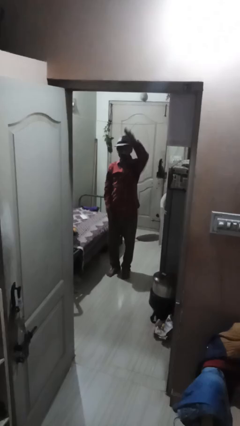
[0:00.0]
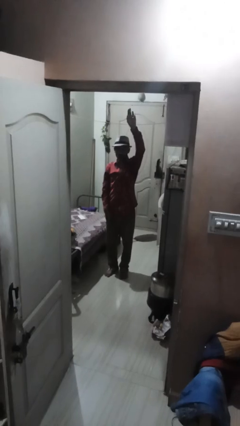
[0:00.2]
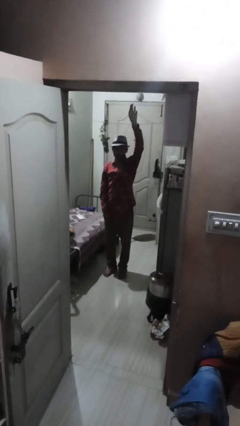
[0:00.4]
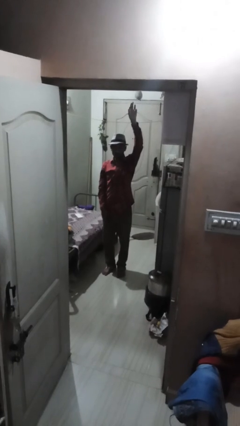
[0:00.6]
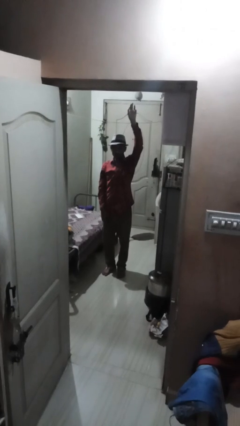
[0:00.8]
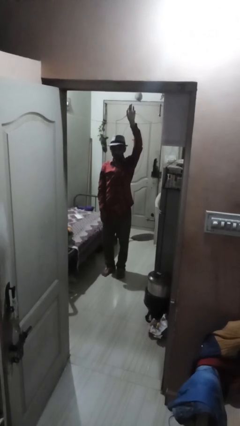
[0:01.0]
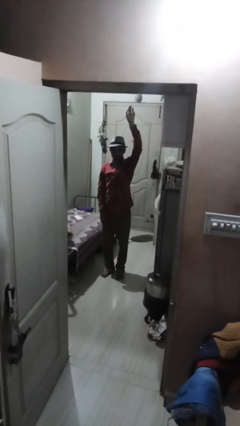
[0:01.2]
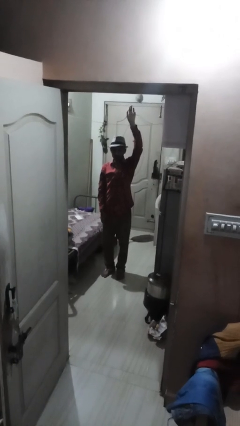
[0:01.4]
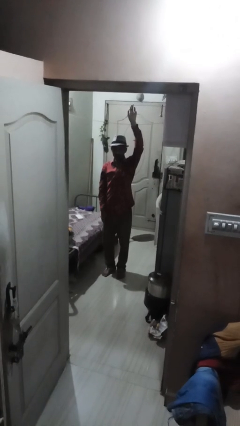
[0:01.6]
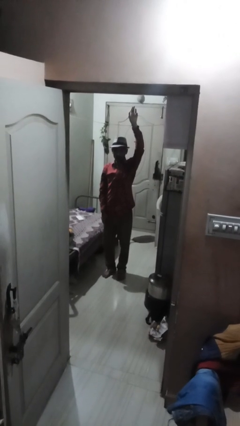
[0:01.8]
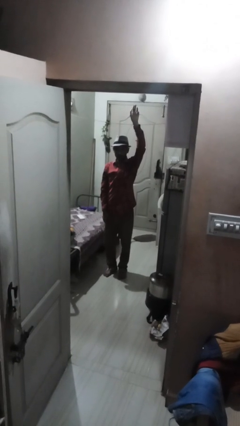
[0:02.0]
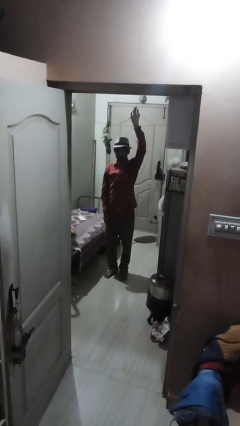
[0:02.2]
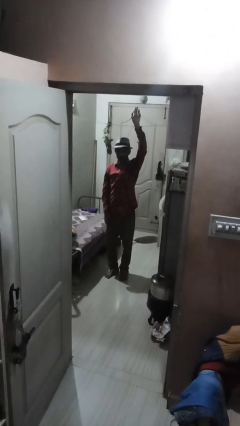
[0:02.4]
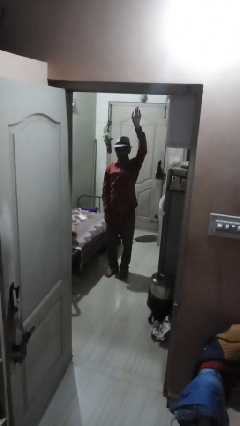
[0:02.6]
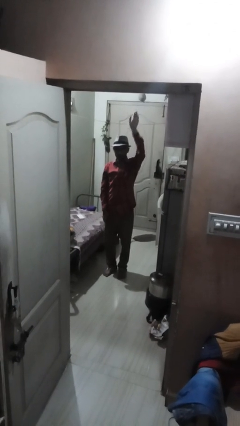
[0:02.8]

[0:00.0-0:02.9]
person gestures swipe up

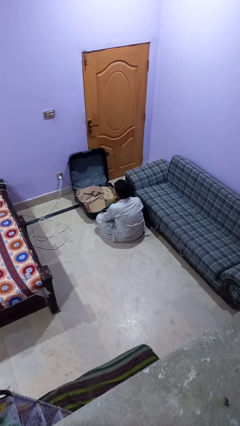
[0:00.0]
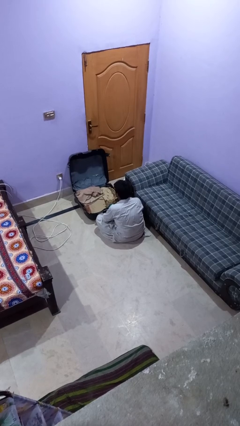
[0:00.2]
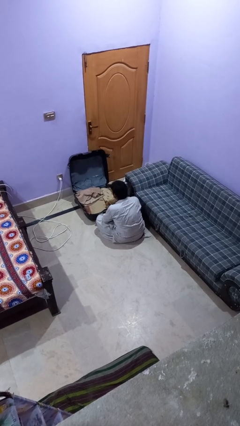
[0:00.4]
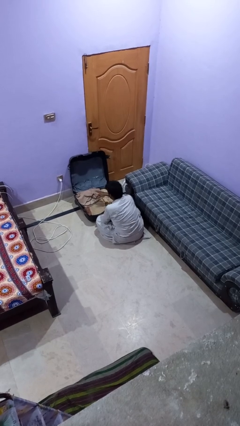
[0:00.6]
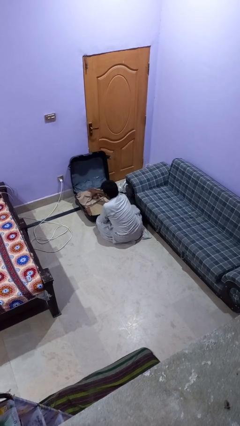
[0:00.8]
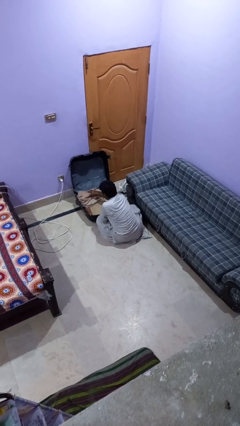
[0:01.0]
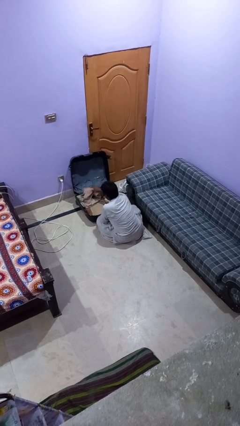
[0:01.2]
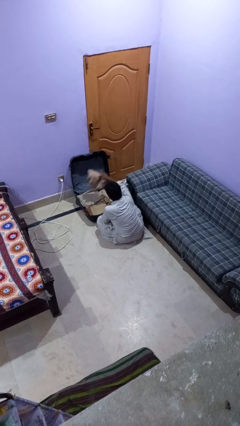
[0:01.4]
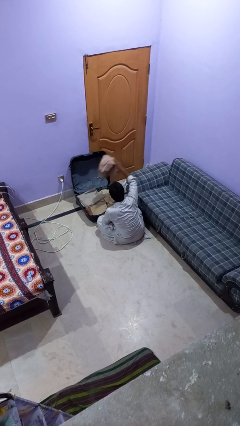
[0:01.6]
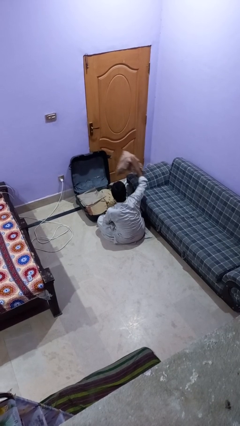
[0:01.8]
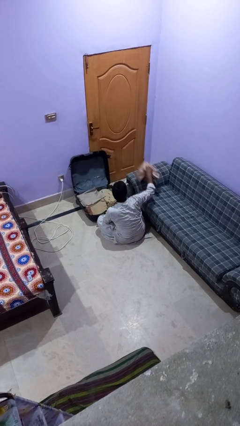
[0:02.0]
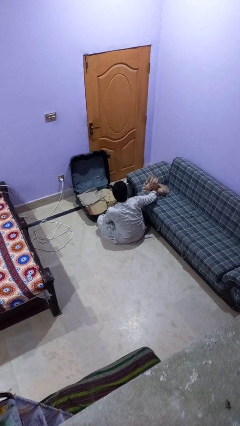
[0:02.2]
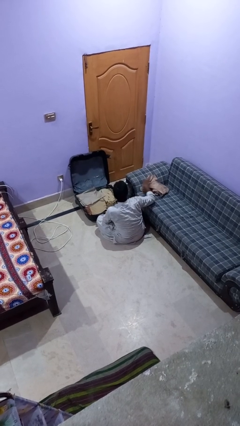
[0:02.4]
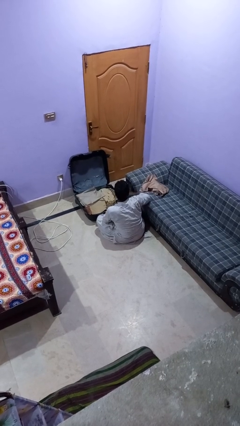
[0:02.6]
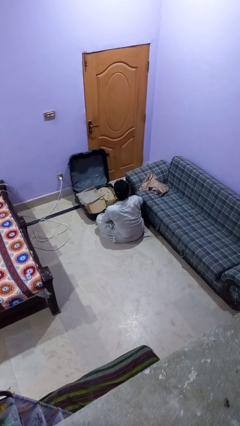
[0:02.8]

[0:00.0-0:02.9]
person unloads clothes from suitcase

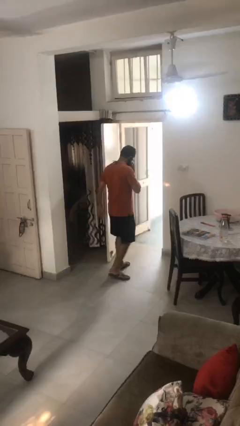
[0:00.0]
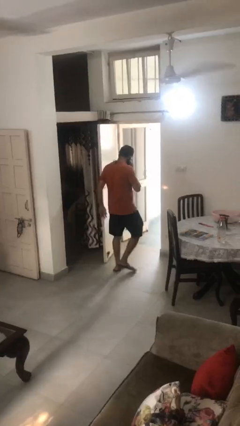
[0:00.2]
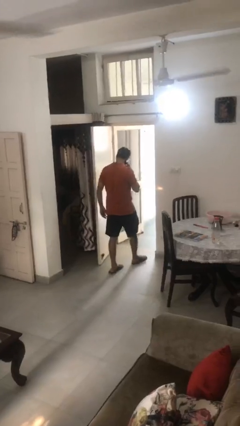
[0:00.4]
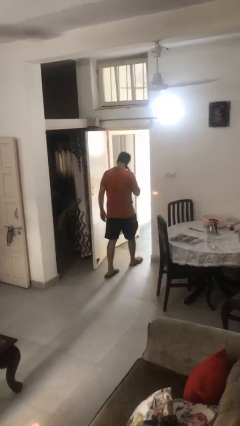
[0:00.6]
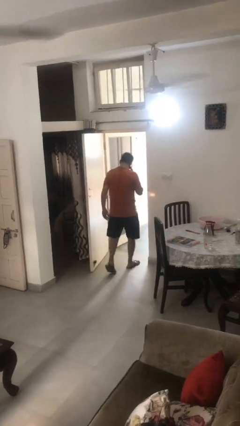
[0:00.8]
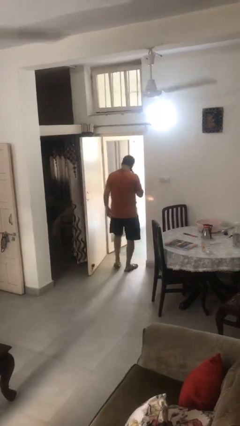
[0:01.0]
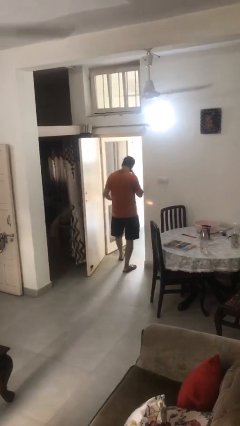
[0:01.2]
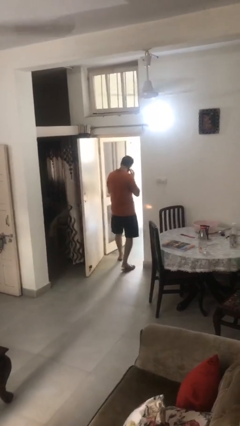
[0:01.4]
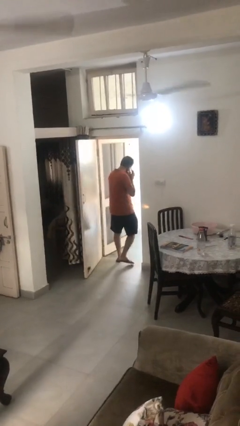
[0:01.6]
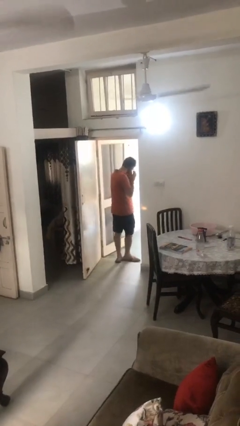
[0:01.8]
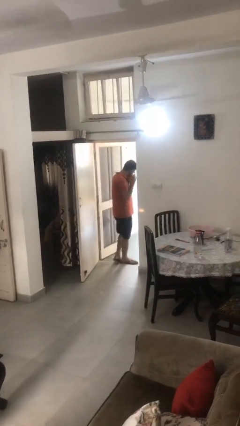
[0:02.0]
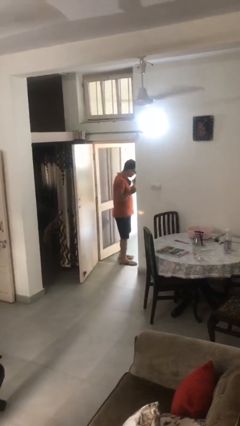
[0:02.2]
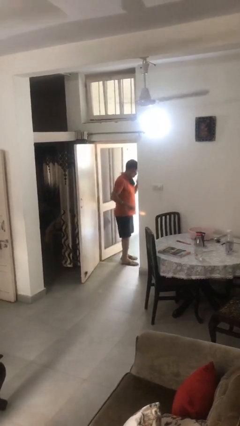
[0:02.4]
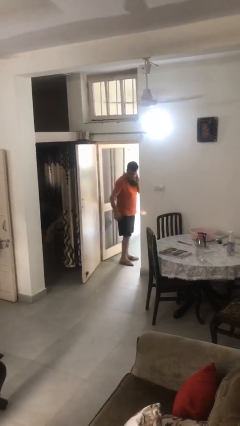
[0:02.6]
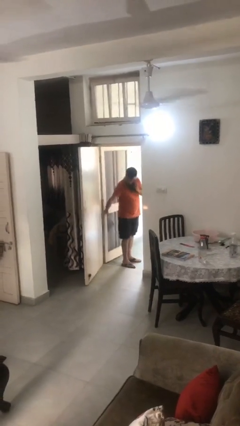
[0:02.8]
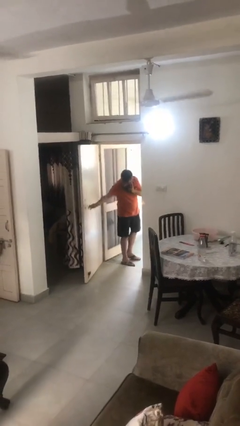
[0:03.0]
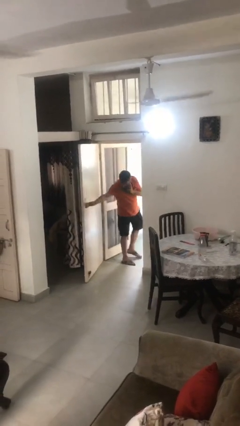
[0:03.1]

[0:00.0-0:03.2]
person exits scene through structure

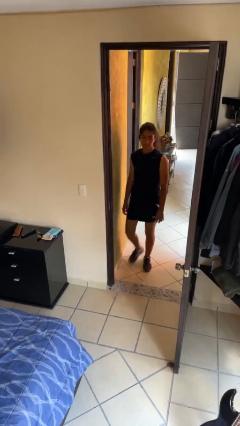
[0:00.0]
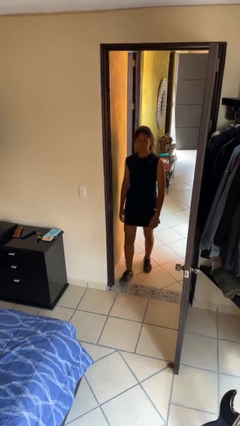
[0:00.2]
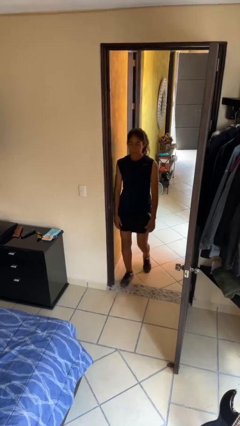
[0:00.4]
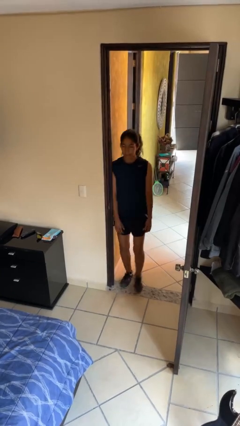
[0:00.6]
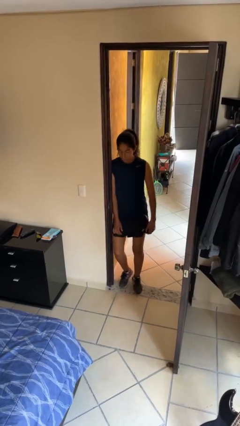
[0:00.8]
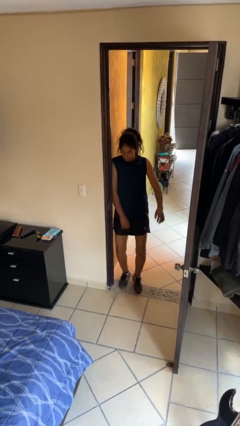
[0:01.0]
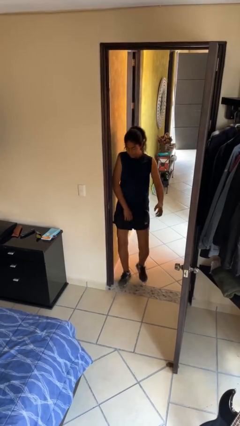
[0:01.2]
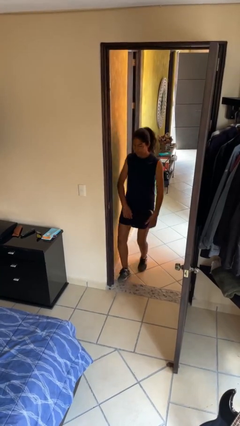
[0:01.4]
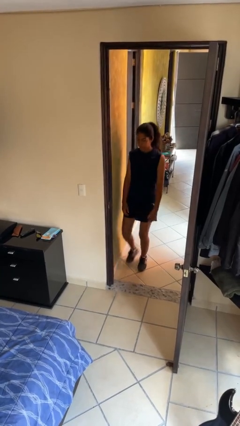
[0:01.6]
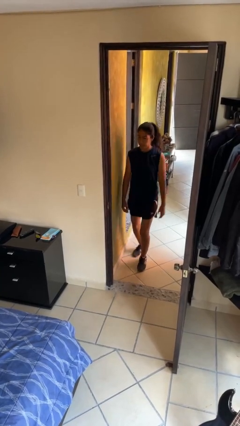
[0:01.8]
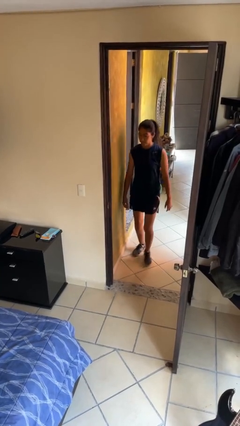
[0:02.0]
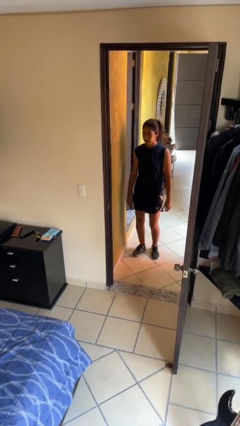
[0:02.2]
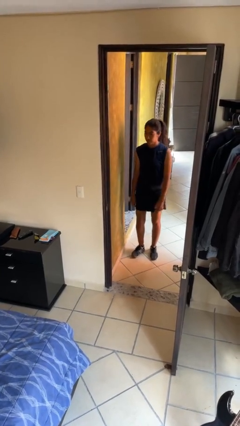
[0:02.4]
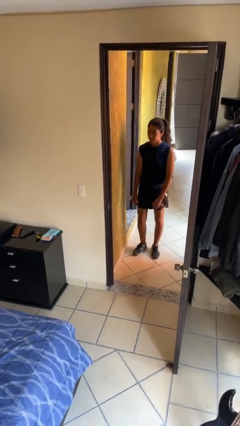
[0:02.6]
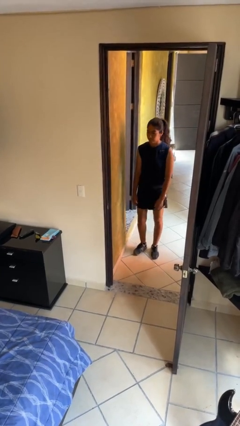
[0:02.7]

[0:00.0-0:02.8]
person bumps into wall

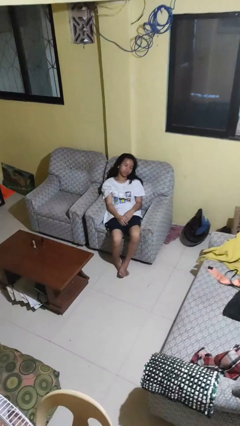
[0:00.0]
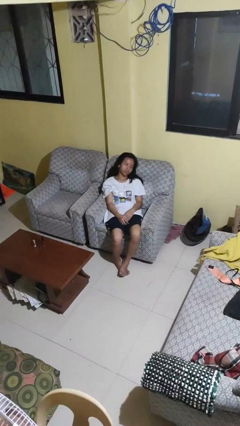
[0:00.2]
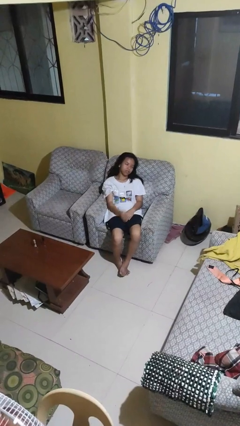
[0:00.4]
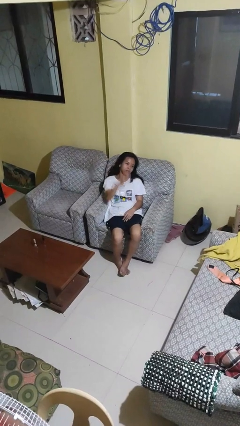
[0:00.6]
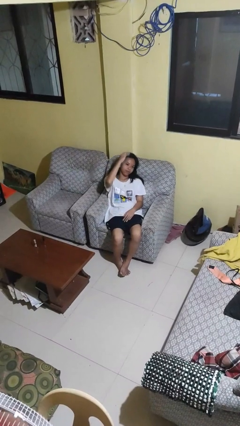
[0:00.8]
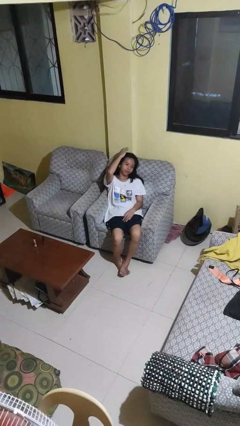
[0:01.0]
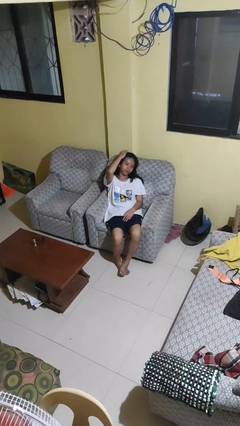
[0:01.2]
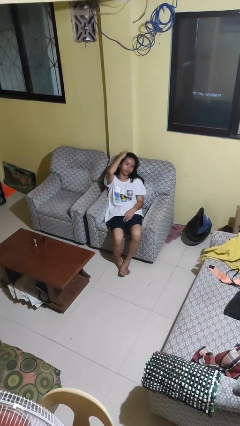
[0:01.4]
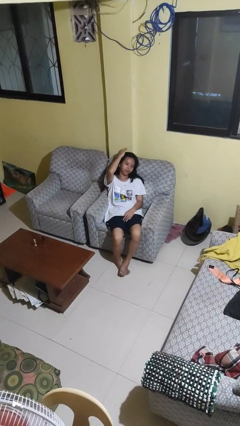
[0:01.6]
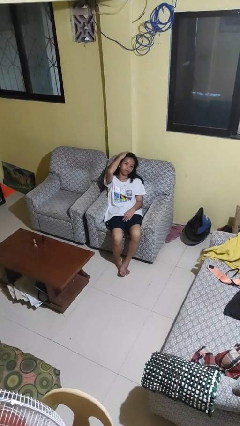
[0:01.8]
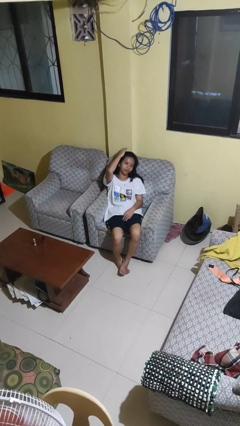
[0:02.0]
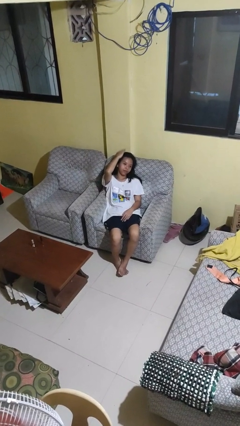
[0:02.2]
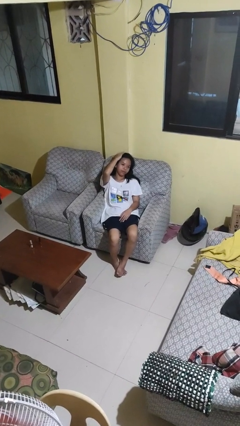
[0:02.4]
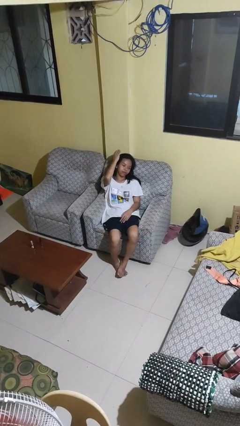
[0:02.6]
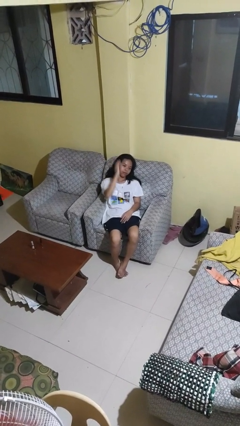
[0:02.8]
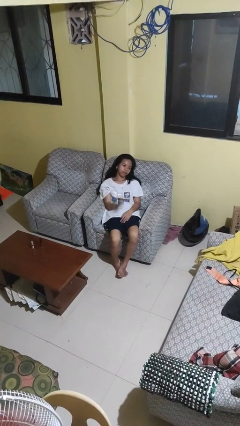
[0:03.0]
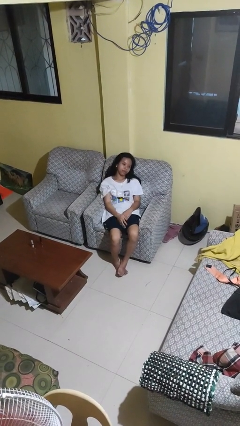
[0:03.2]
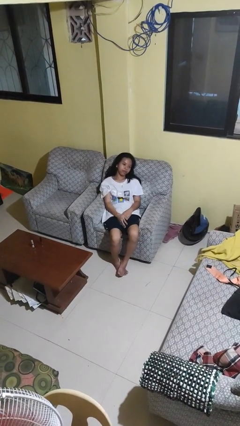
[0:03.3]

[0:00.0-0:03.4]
person pats head

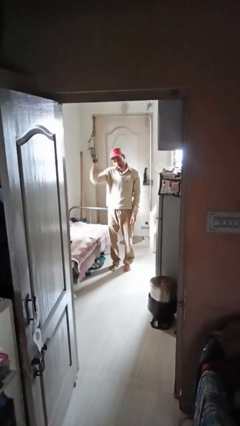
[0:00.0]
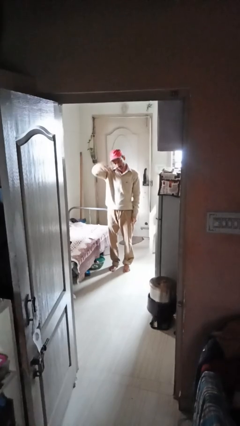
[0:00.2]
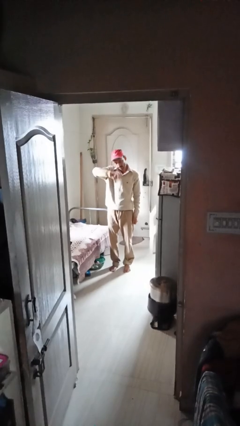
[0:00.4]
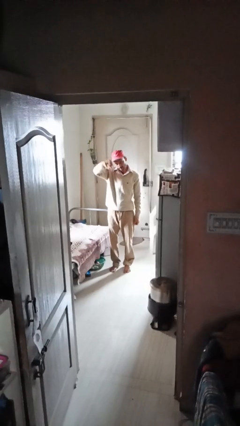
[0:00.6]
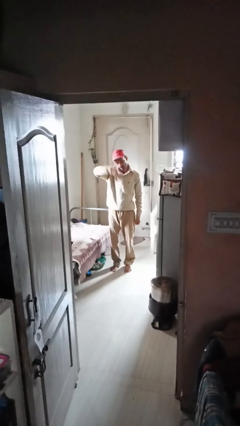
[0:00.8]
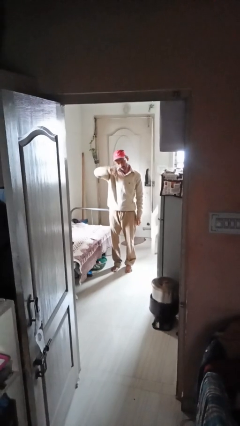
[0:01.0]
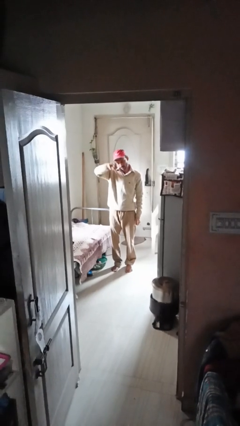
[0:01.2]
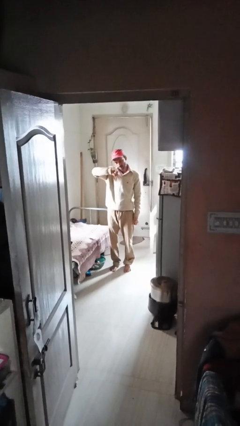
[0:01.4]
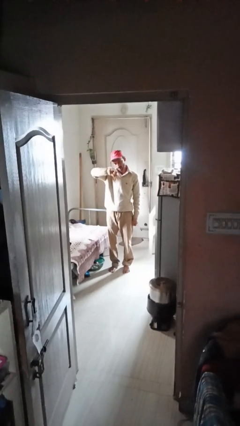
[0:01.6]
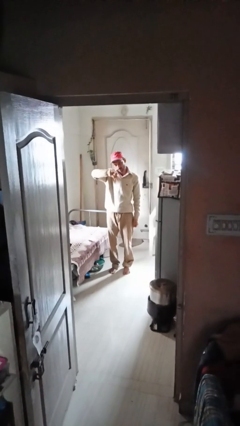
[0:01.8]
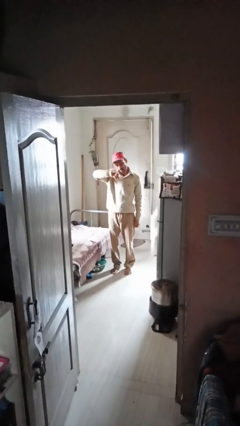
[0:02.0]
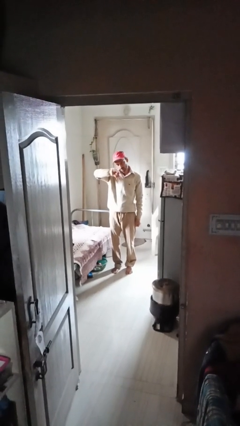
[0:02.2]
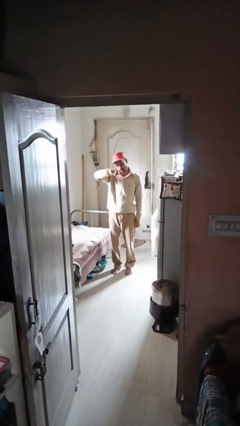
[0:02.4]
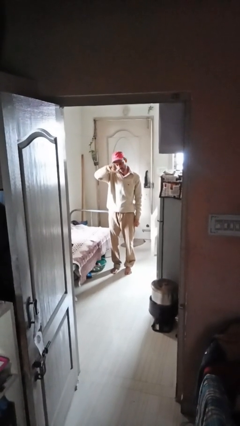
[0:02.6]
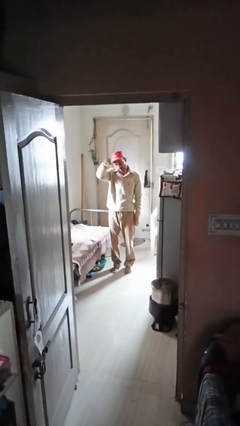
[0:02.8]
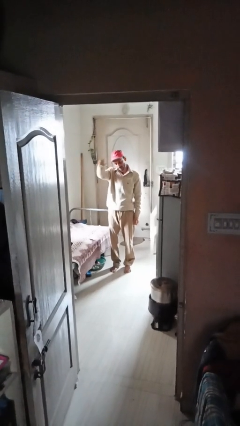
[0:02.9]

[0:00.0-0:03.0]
person gestures thumbs down
